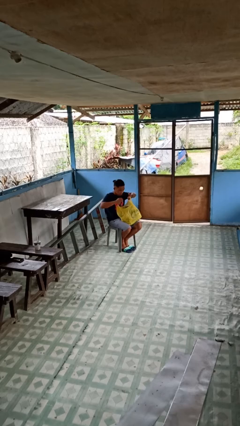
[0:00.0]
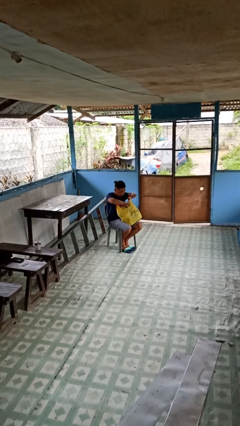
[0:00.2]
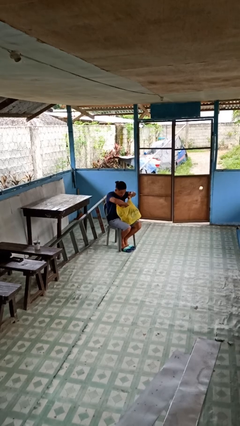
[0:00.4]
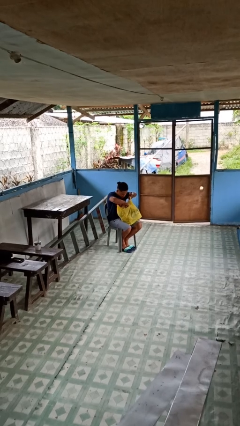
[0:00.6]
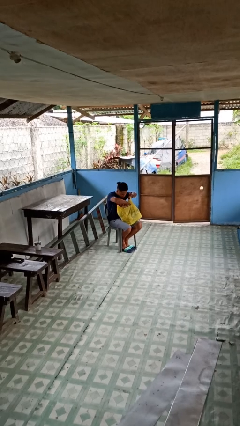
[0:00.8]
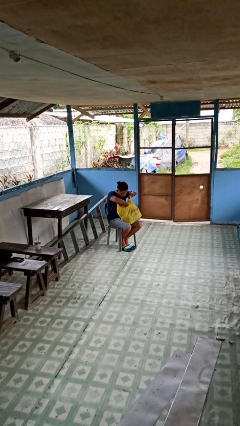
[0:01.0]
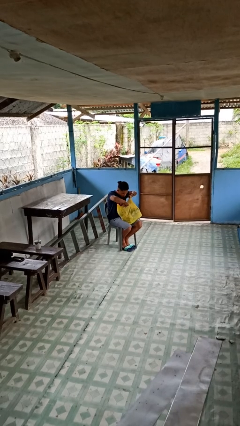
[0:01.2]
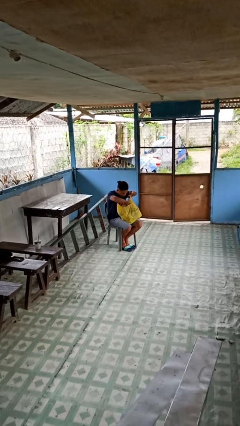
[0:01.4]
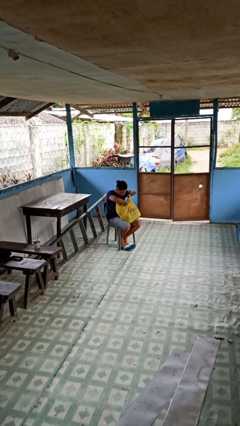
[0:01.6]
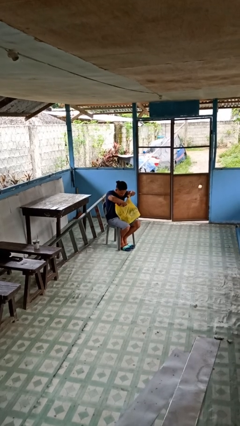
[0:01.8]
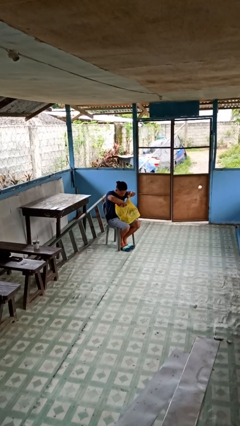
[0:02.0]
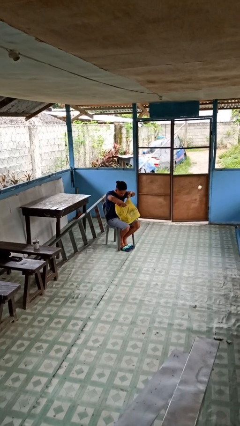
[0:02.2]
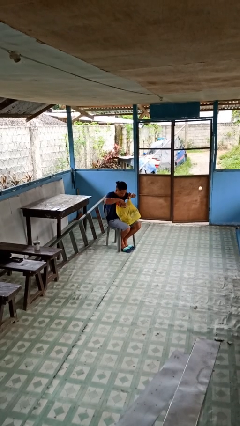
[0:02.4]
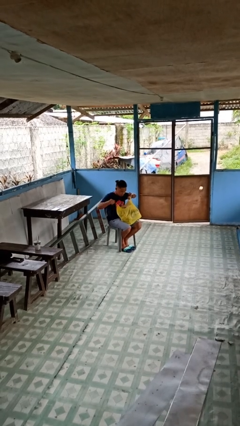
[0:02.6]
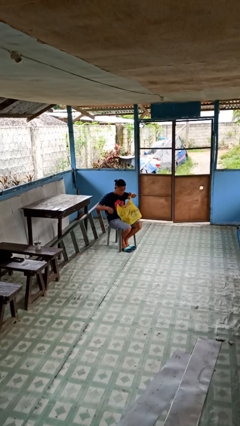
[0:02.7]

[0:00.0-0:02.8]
person searches in bag

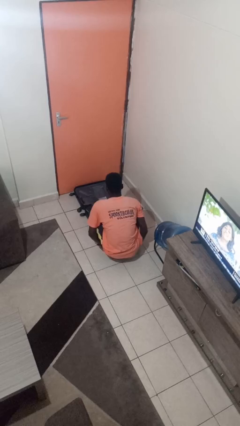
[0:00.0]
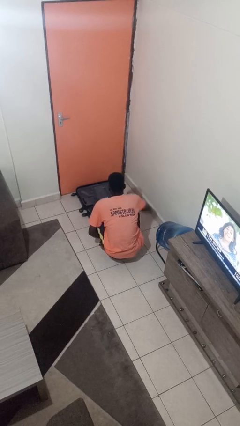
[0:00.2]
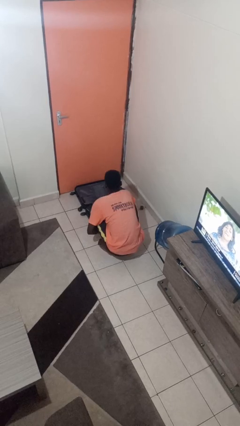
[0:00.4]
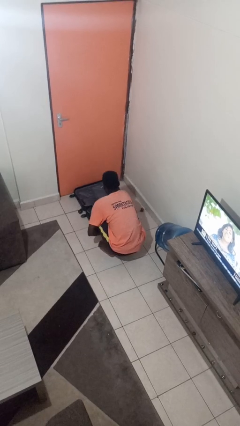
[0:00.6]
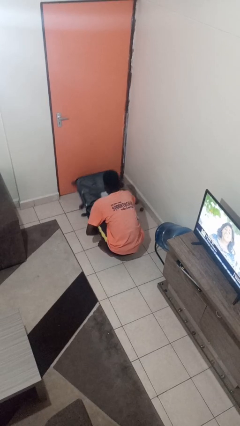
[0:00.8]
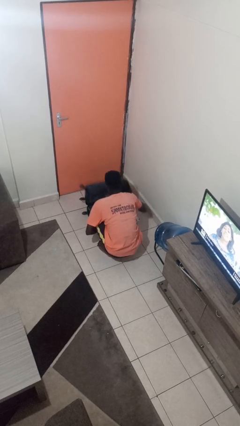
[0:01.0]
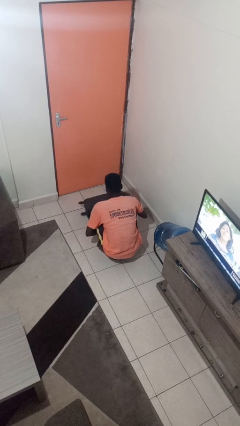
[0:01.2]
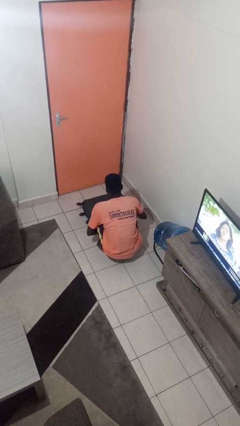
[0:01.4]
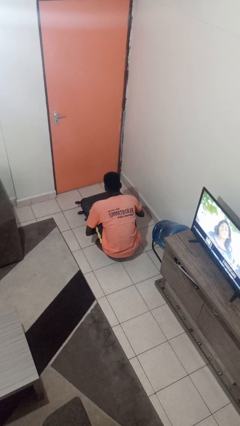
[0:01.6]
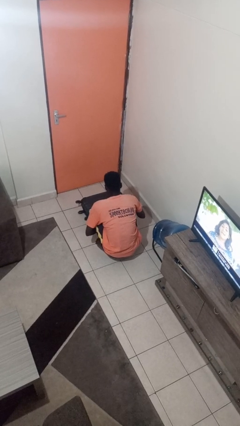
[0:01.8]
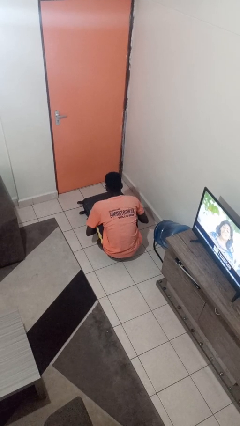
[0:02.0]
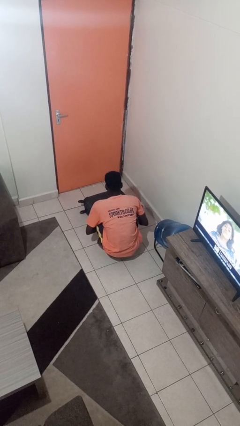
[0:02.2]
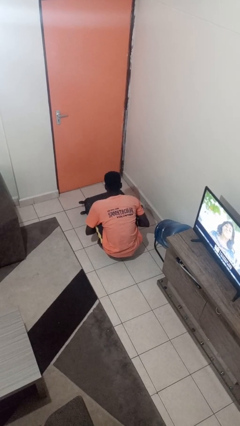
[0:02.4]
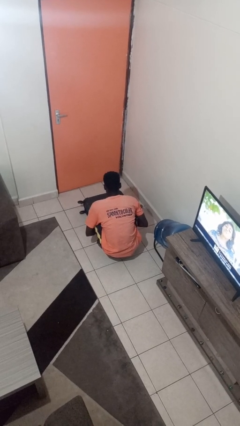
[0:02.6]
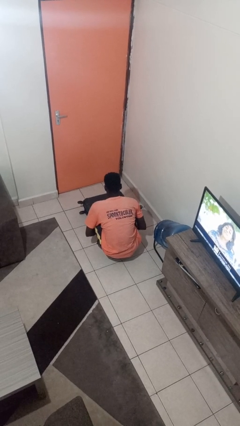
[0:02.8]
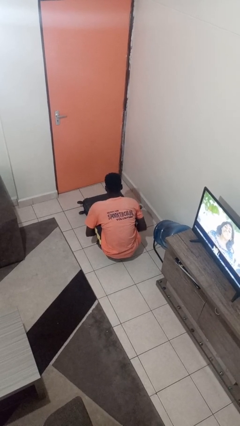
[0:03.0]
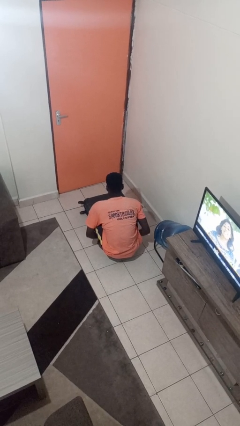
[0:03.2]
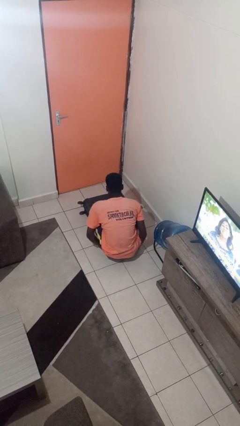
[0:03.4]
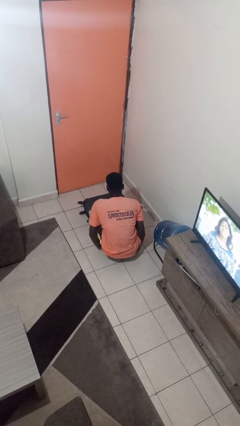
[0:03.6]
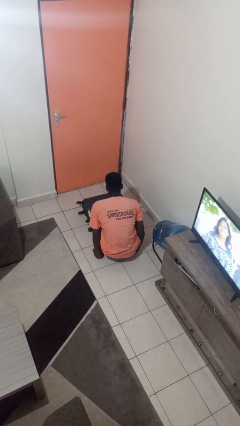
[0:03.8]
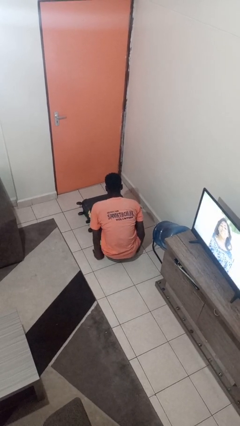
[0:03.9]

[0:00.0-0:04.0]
person closes suitcase

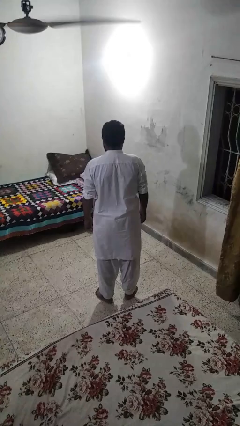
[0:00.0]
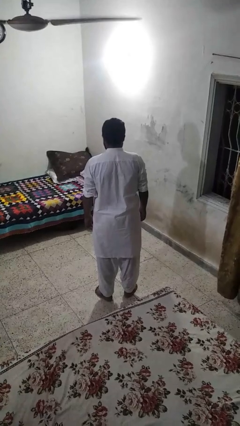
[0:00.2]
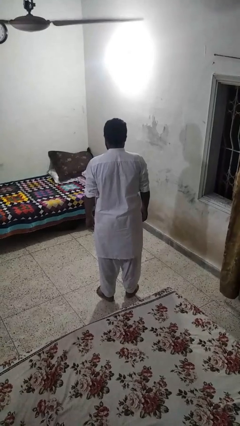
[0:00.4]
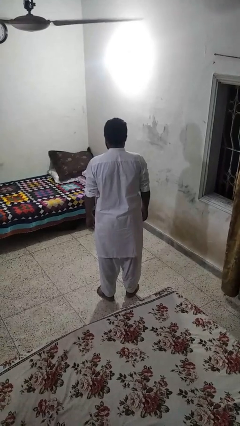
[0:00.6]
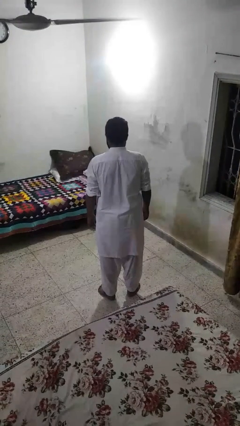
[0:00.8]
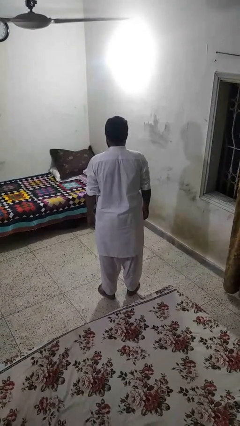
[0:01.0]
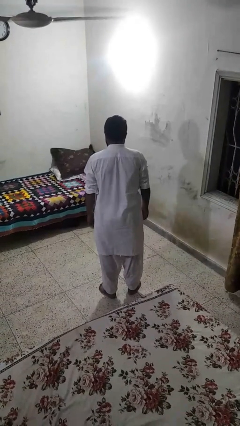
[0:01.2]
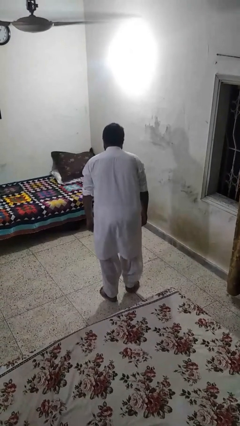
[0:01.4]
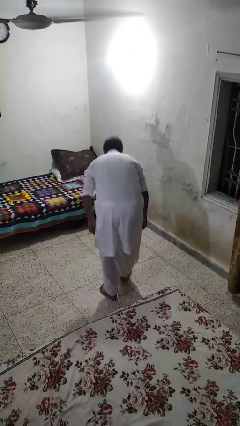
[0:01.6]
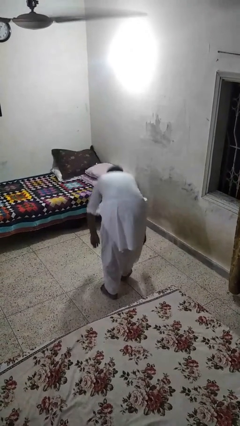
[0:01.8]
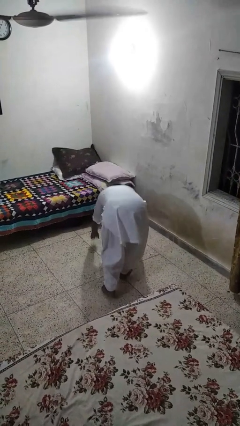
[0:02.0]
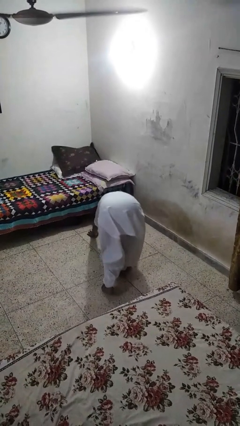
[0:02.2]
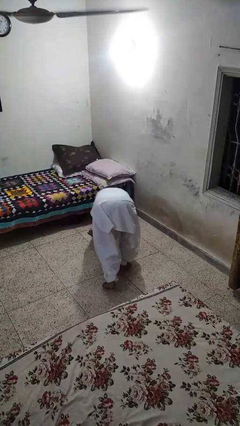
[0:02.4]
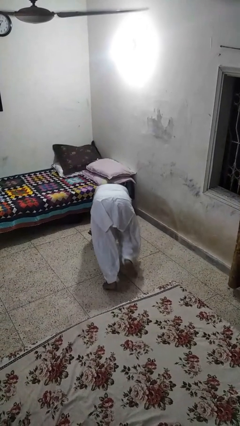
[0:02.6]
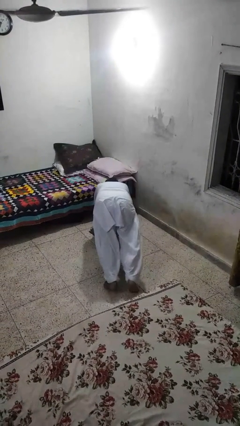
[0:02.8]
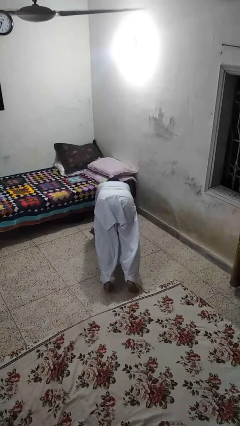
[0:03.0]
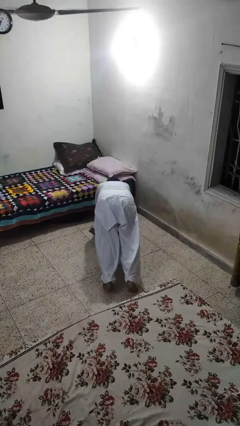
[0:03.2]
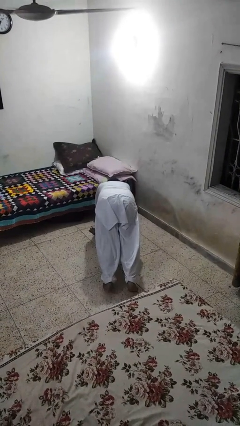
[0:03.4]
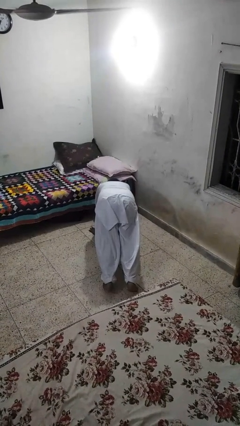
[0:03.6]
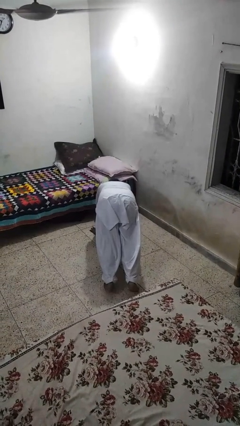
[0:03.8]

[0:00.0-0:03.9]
person exercises with plank

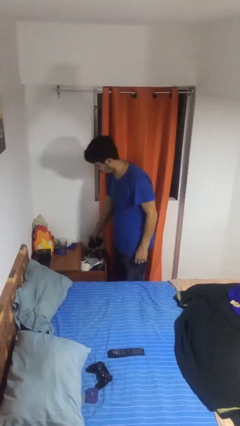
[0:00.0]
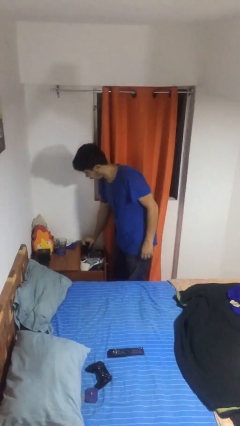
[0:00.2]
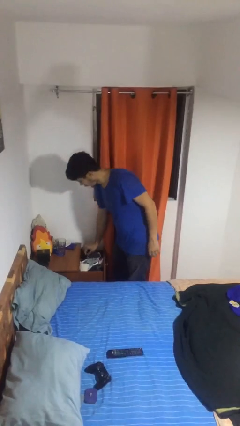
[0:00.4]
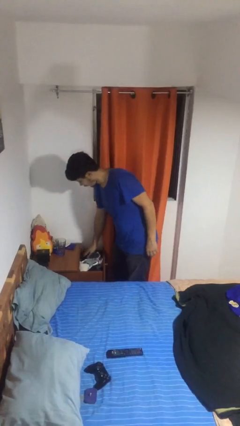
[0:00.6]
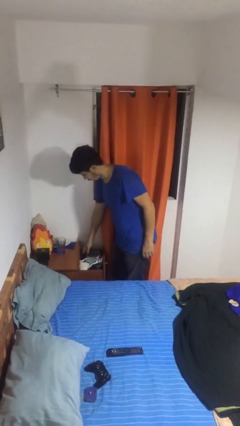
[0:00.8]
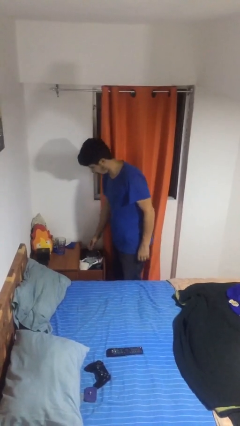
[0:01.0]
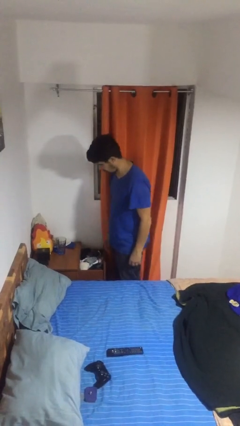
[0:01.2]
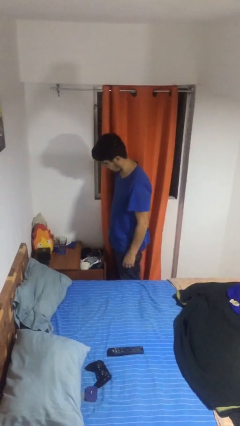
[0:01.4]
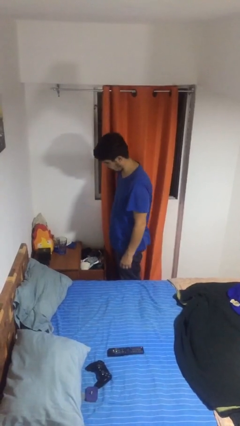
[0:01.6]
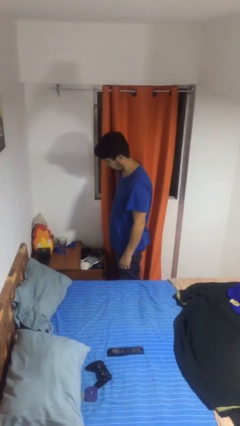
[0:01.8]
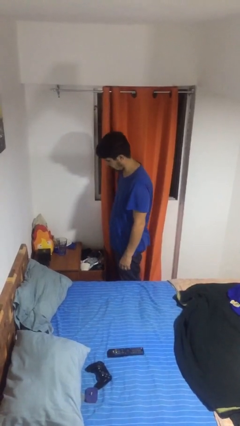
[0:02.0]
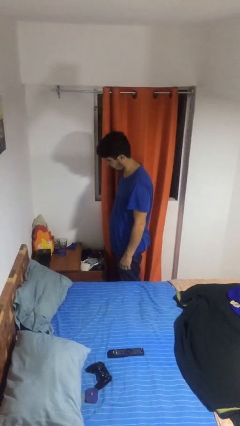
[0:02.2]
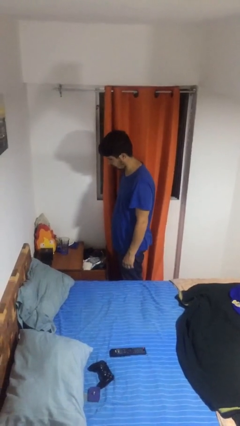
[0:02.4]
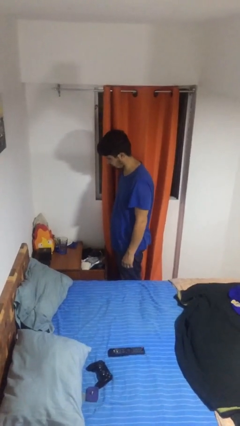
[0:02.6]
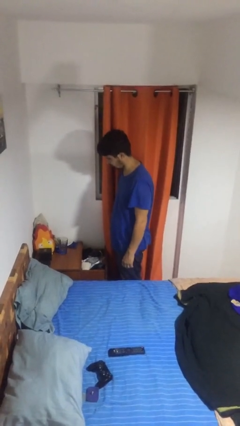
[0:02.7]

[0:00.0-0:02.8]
person puts clothes into dresser

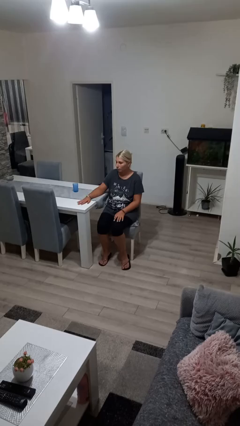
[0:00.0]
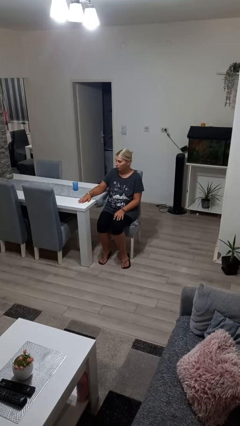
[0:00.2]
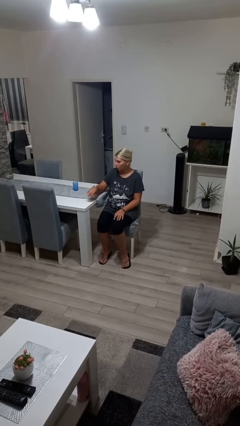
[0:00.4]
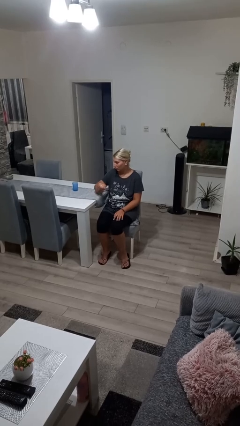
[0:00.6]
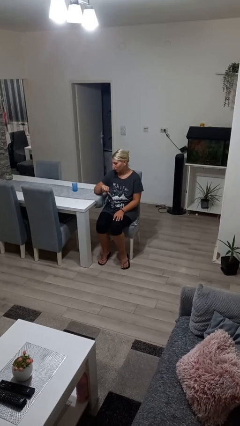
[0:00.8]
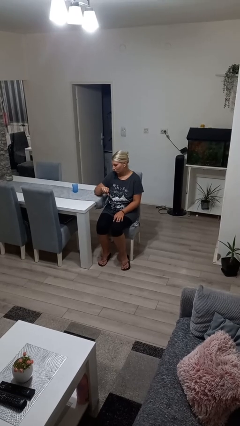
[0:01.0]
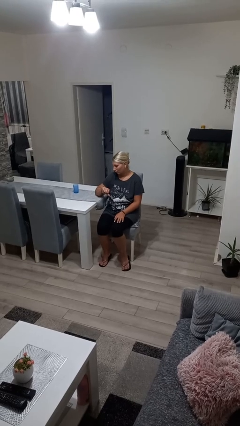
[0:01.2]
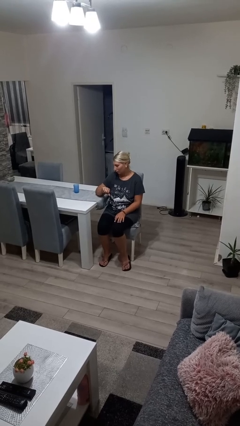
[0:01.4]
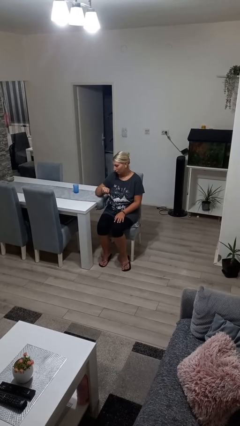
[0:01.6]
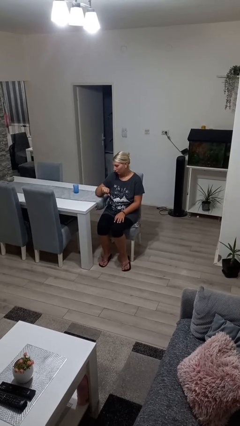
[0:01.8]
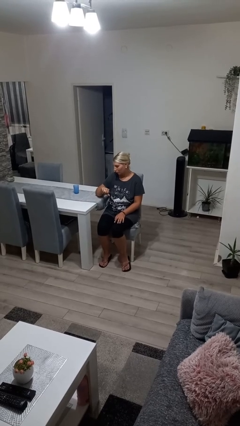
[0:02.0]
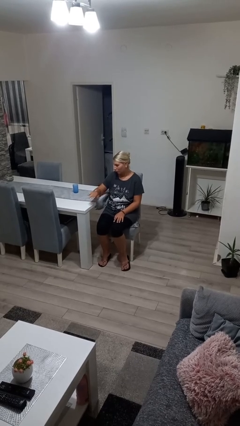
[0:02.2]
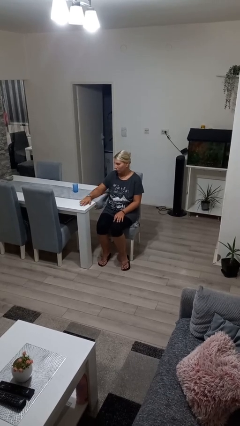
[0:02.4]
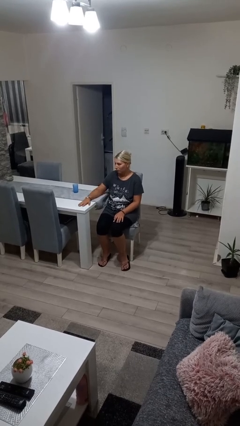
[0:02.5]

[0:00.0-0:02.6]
person looks at wristwatch

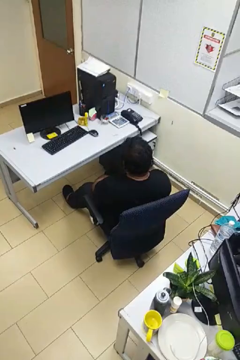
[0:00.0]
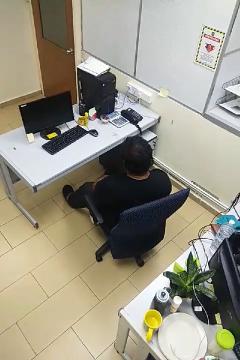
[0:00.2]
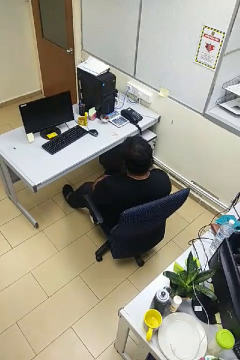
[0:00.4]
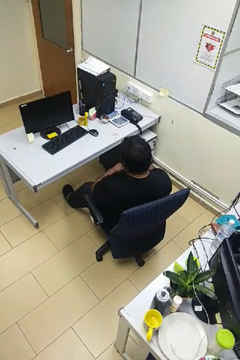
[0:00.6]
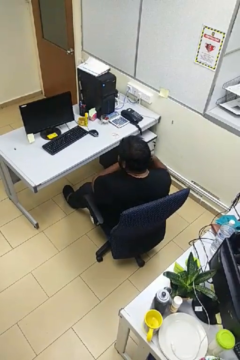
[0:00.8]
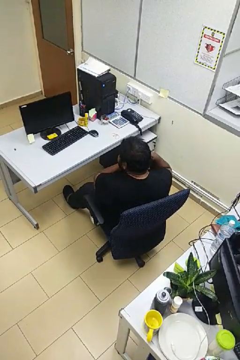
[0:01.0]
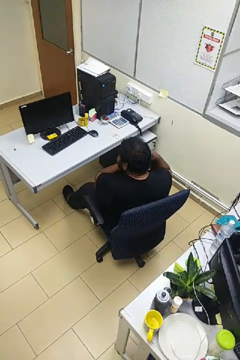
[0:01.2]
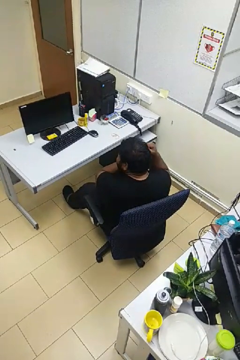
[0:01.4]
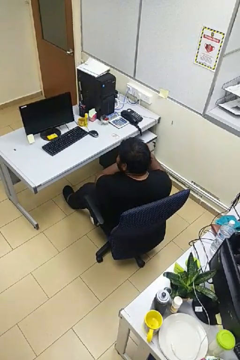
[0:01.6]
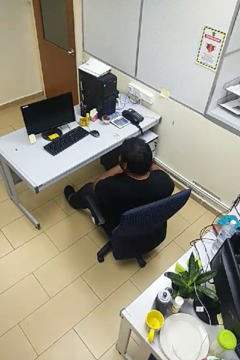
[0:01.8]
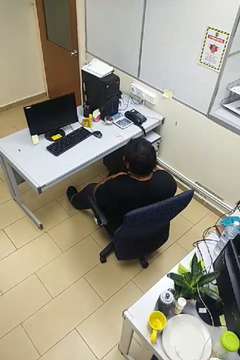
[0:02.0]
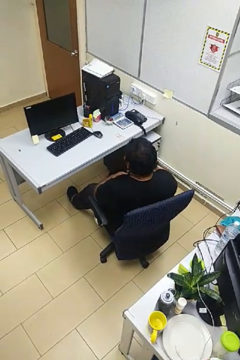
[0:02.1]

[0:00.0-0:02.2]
person takes off earrings
